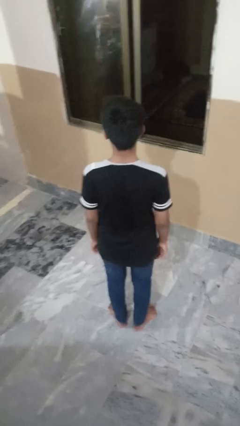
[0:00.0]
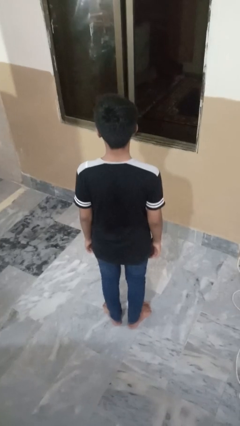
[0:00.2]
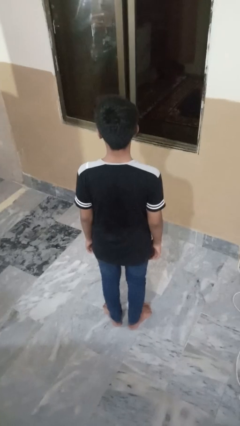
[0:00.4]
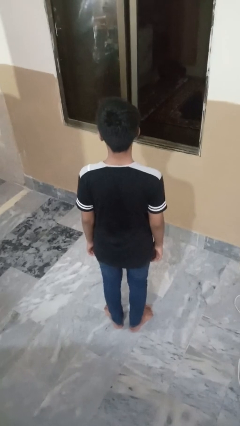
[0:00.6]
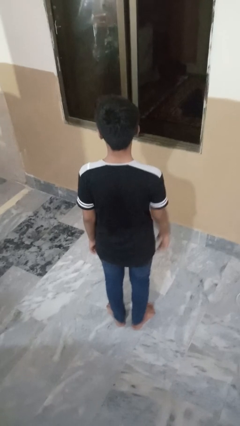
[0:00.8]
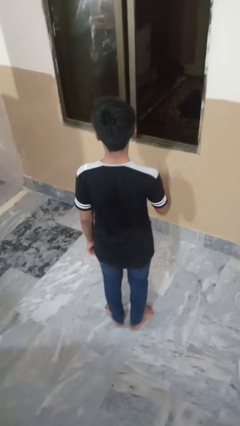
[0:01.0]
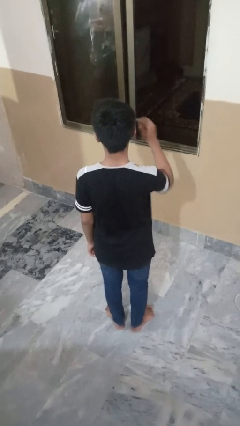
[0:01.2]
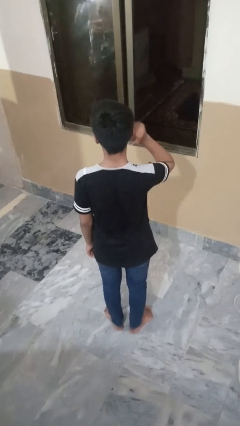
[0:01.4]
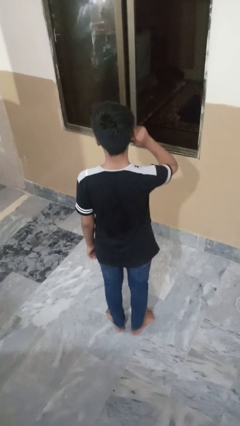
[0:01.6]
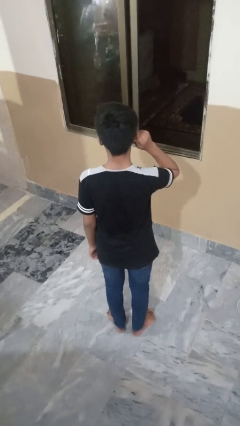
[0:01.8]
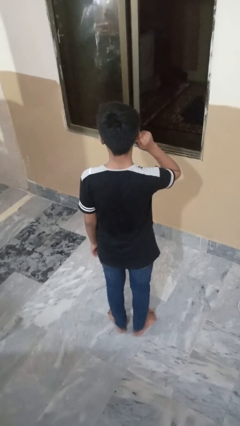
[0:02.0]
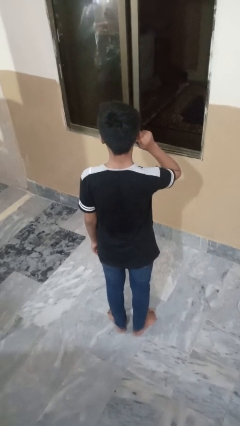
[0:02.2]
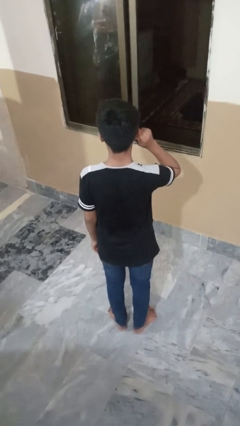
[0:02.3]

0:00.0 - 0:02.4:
person touches earlobe

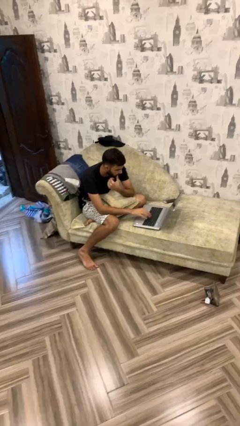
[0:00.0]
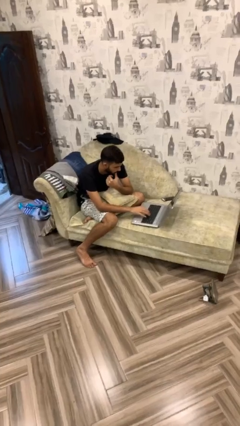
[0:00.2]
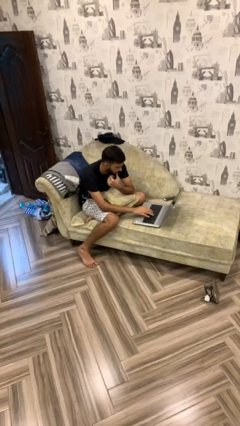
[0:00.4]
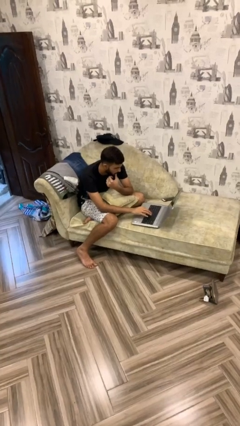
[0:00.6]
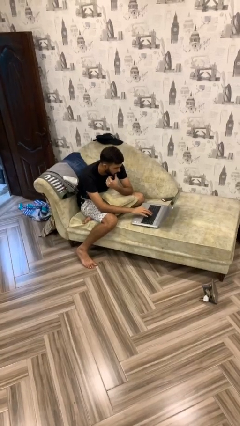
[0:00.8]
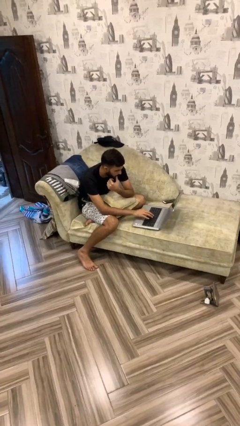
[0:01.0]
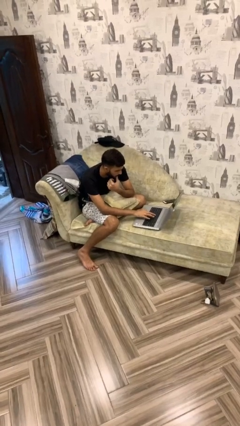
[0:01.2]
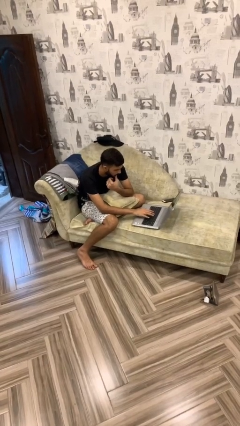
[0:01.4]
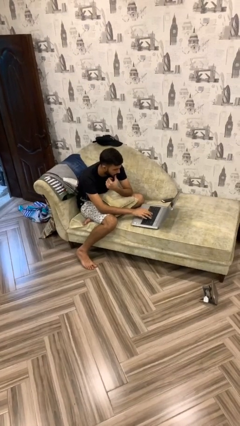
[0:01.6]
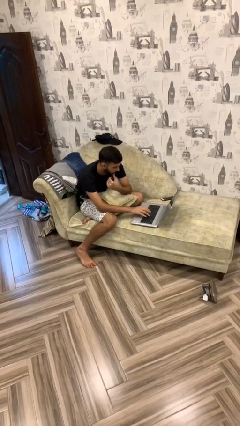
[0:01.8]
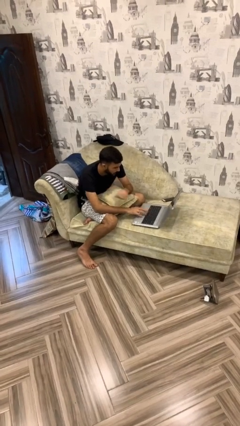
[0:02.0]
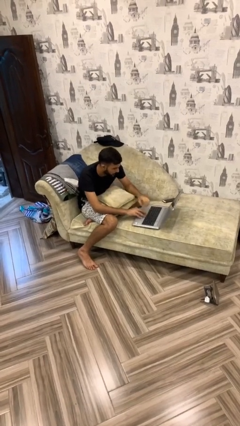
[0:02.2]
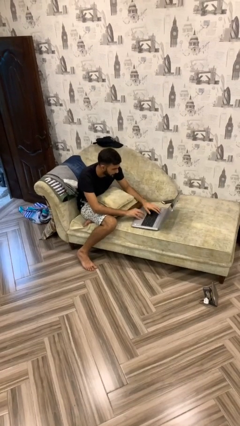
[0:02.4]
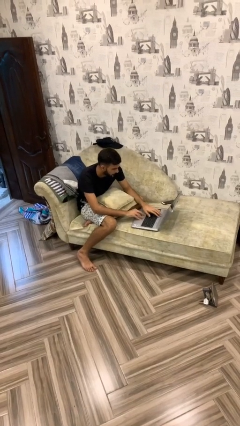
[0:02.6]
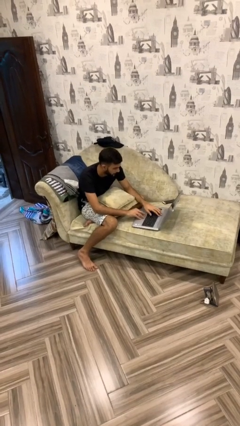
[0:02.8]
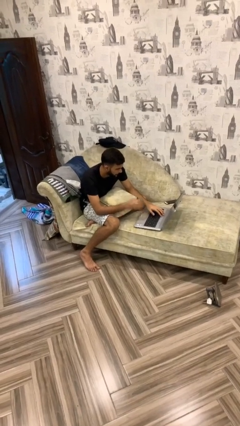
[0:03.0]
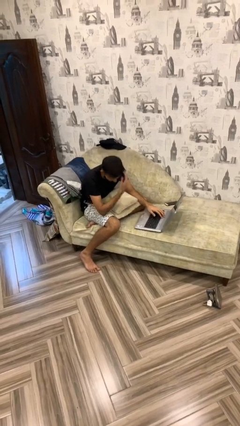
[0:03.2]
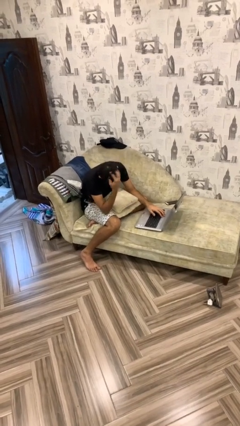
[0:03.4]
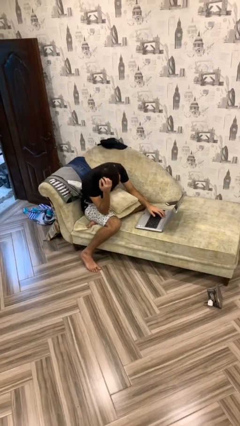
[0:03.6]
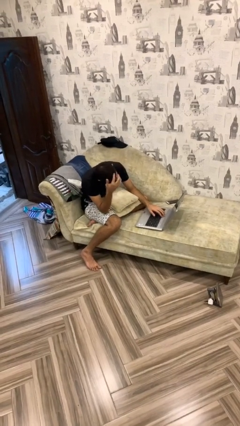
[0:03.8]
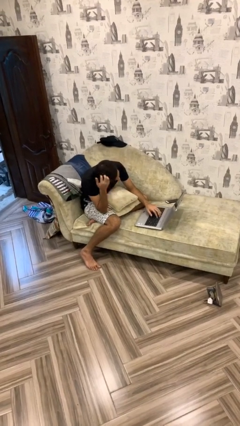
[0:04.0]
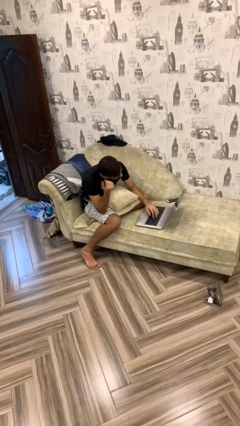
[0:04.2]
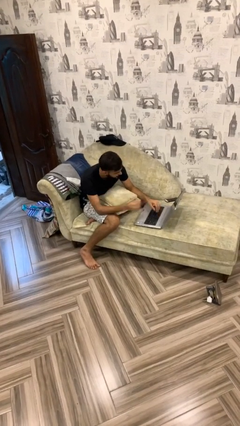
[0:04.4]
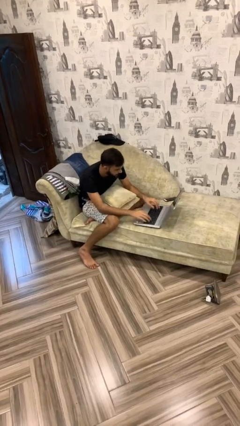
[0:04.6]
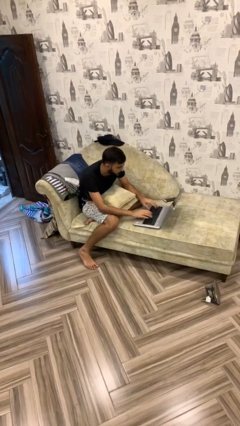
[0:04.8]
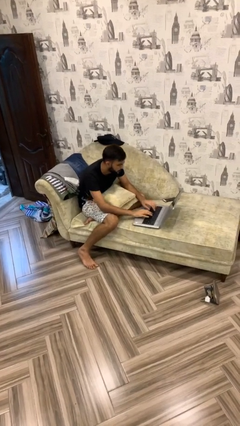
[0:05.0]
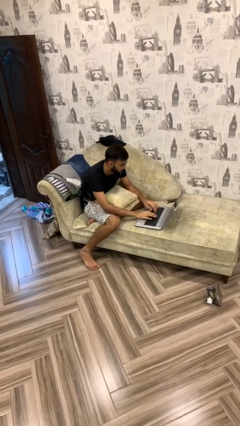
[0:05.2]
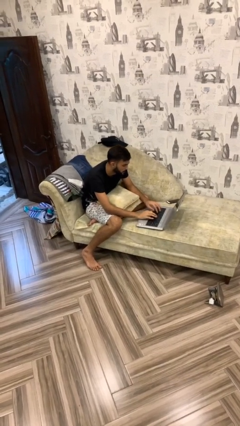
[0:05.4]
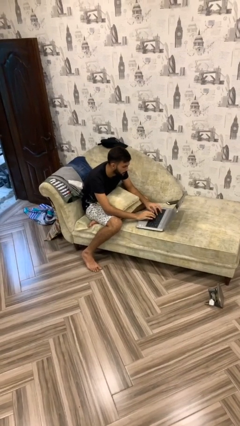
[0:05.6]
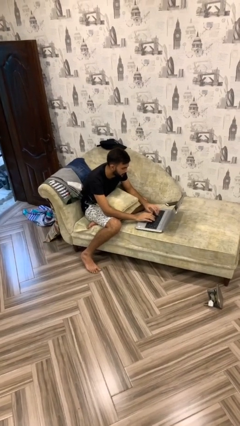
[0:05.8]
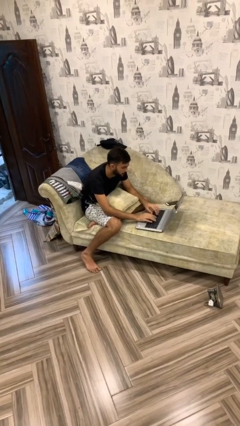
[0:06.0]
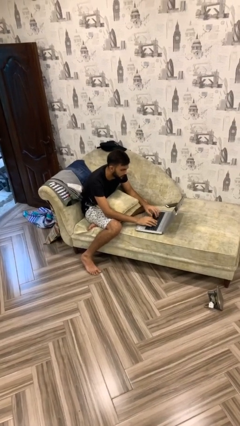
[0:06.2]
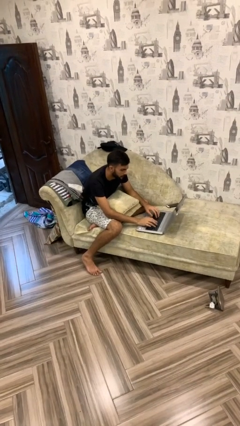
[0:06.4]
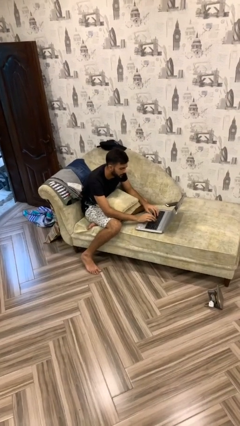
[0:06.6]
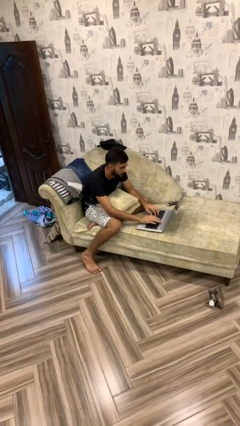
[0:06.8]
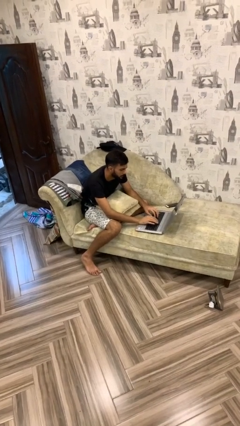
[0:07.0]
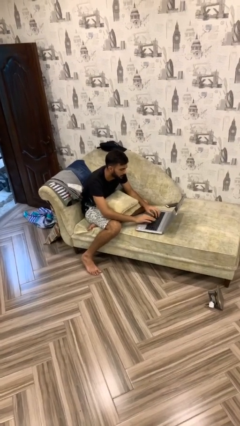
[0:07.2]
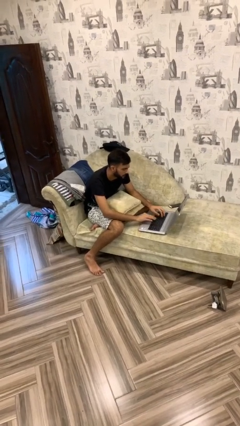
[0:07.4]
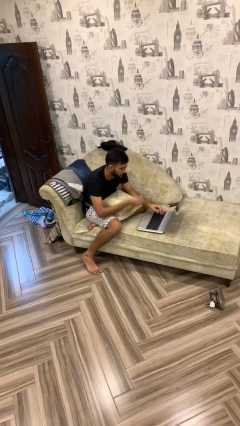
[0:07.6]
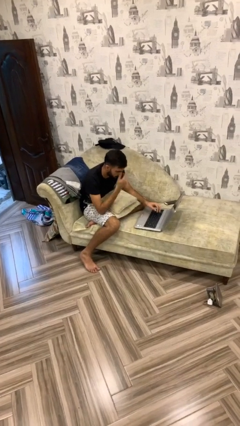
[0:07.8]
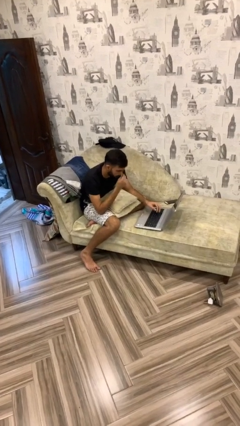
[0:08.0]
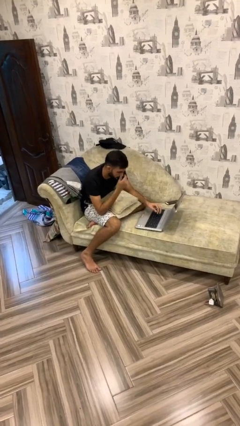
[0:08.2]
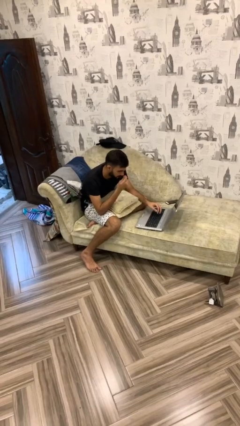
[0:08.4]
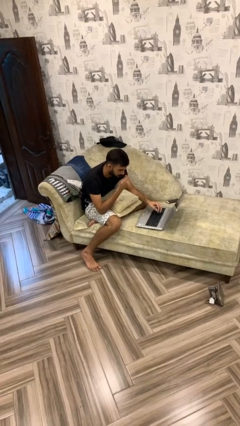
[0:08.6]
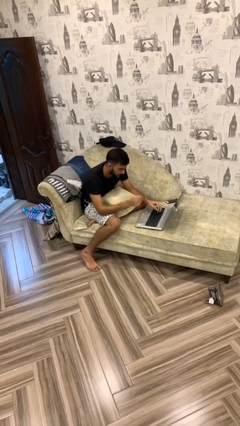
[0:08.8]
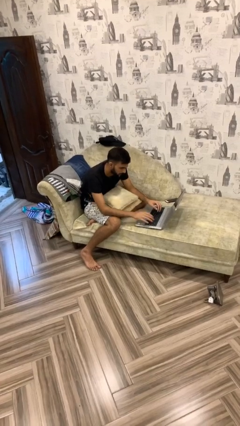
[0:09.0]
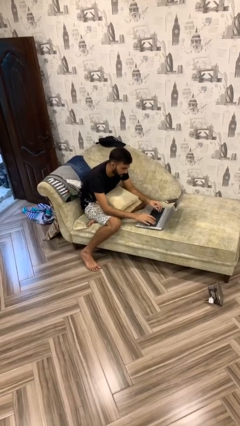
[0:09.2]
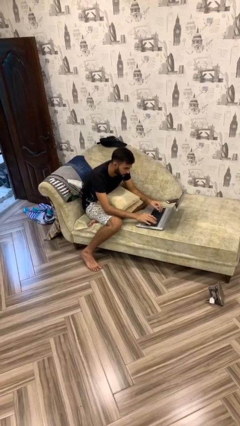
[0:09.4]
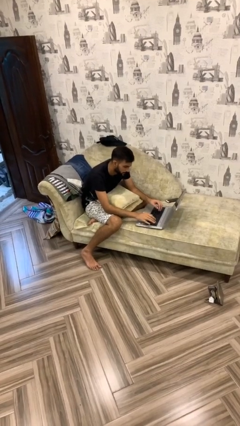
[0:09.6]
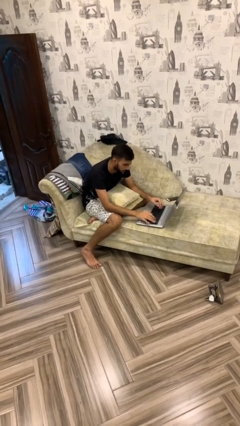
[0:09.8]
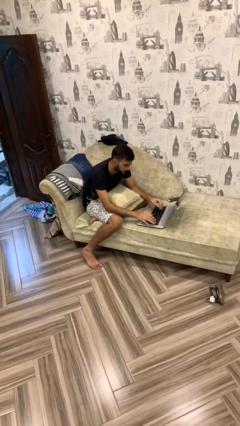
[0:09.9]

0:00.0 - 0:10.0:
person interacts with laptop

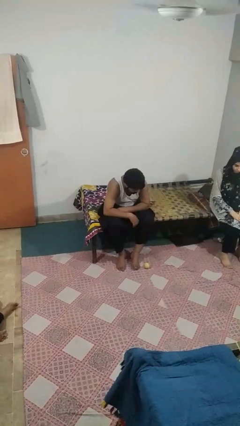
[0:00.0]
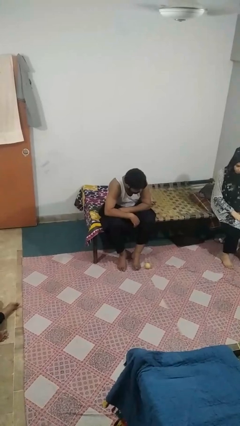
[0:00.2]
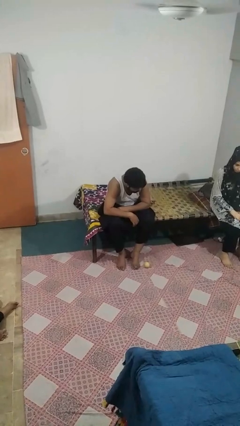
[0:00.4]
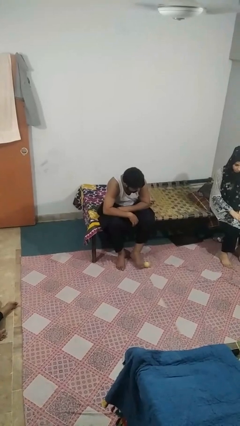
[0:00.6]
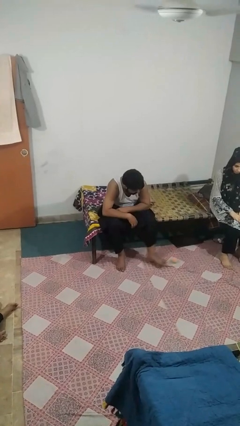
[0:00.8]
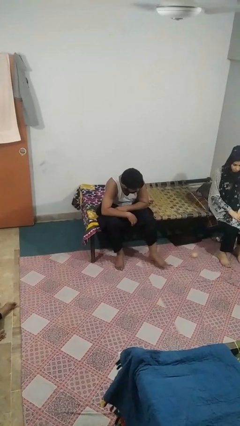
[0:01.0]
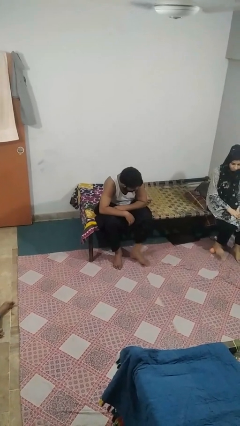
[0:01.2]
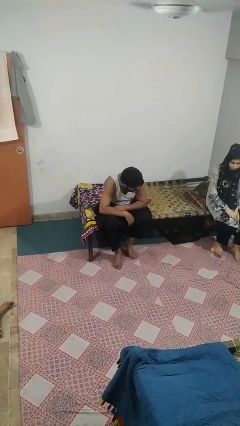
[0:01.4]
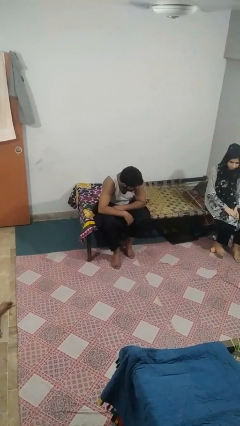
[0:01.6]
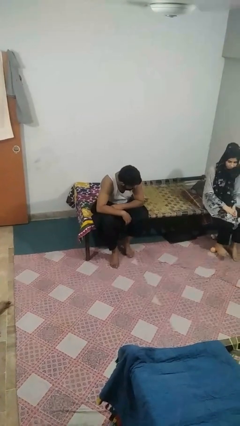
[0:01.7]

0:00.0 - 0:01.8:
person kicks object to person

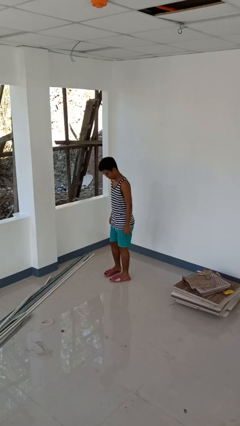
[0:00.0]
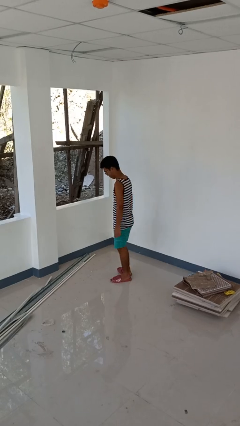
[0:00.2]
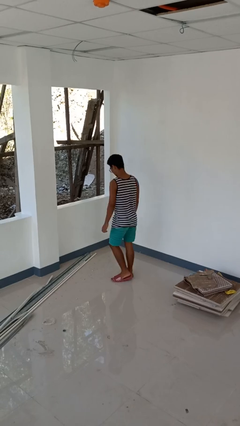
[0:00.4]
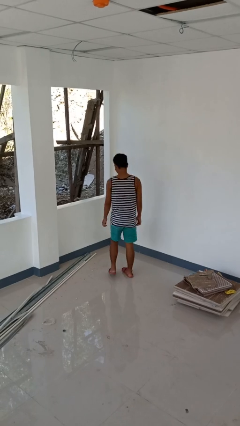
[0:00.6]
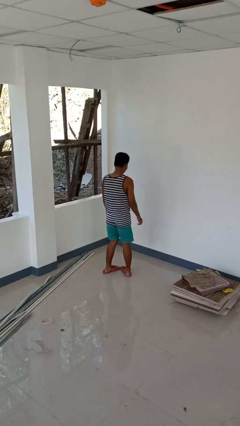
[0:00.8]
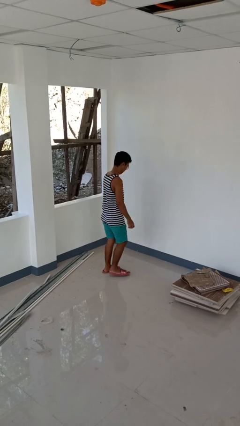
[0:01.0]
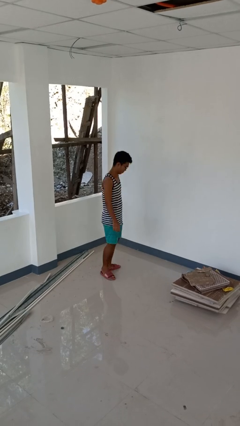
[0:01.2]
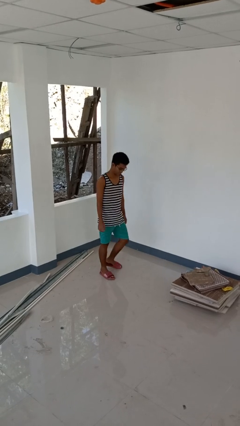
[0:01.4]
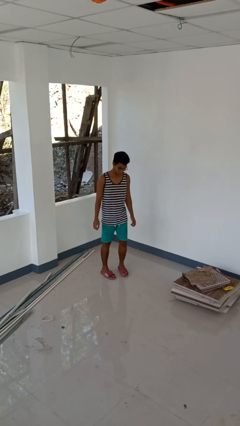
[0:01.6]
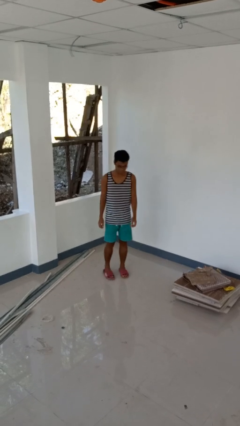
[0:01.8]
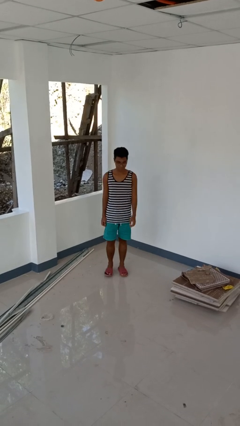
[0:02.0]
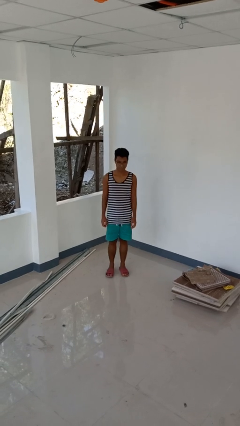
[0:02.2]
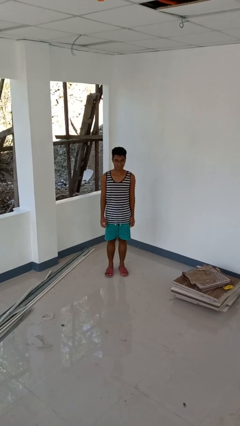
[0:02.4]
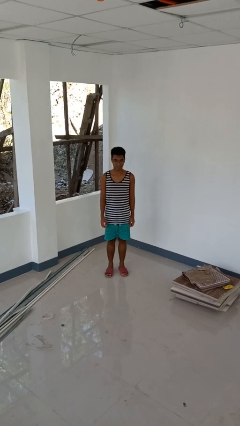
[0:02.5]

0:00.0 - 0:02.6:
person twirls

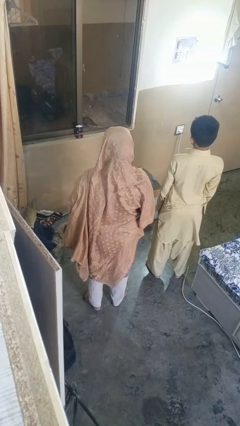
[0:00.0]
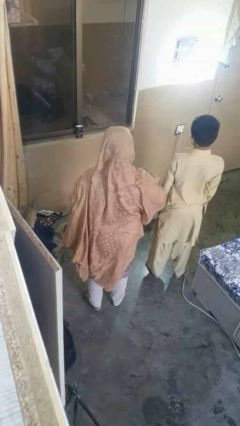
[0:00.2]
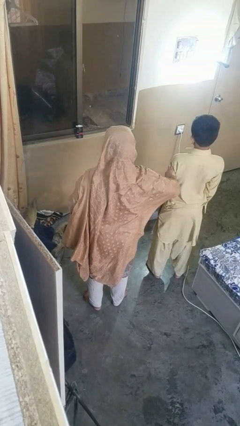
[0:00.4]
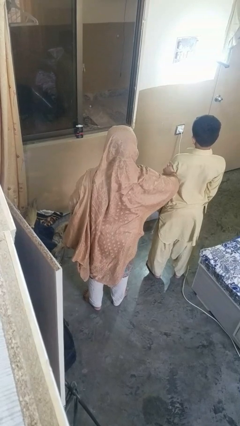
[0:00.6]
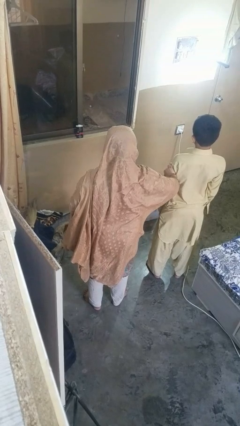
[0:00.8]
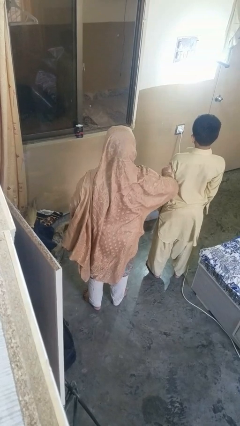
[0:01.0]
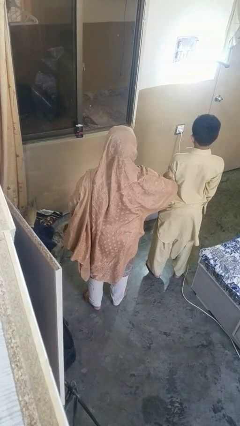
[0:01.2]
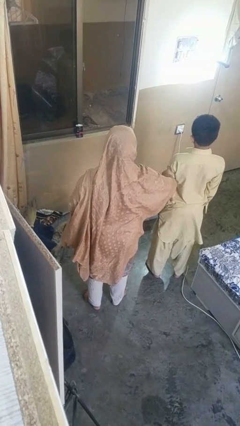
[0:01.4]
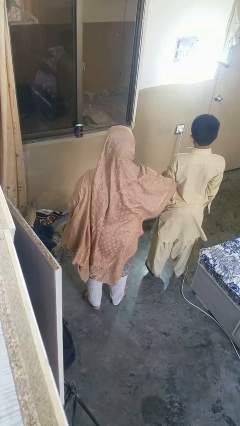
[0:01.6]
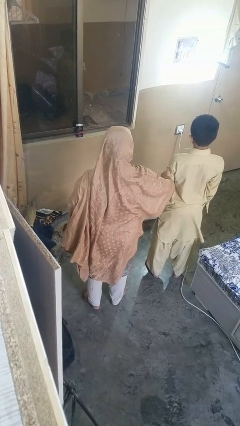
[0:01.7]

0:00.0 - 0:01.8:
person grabs person by bicep
